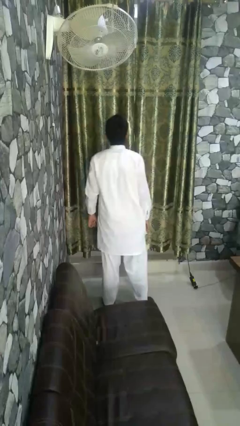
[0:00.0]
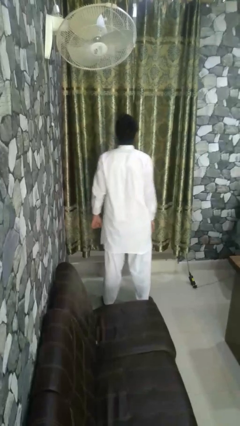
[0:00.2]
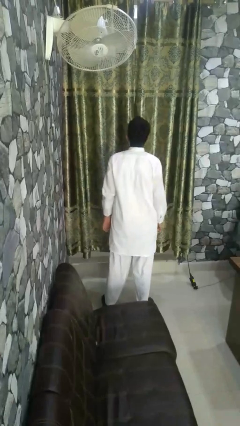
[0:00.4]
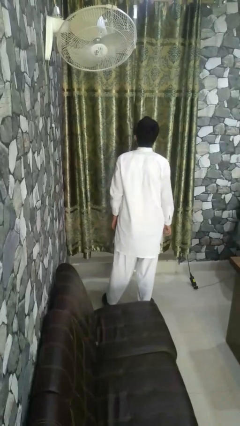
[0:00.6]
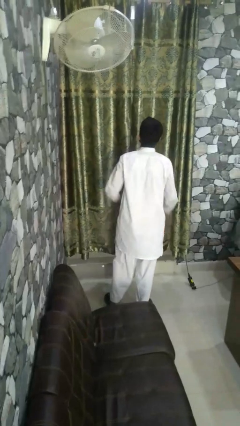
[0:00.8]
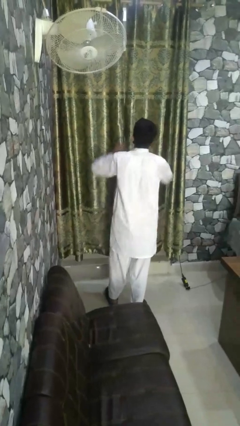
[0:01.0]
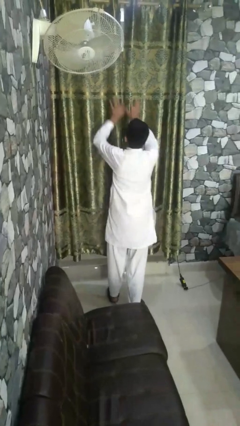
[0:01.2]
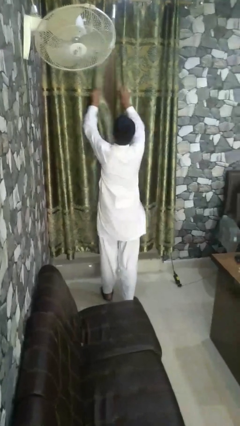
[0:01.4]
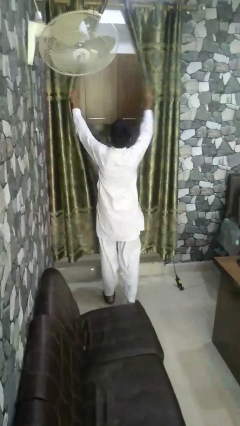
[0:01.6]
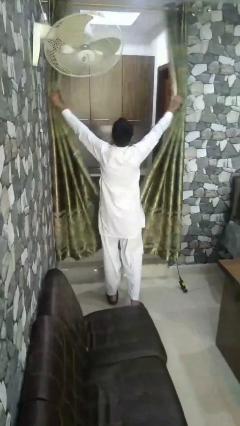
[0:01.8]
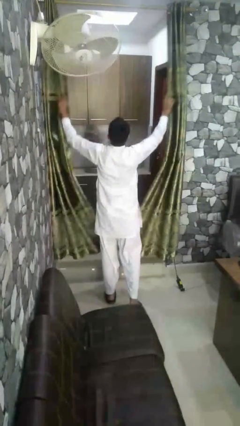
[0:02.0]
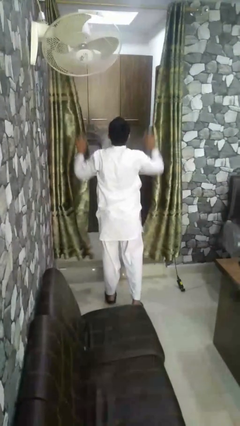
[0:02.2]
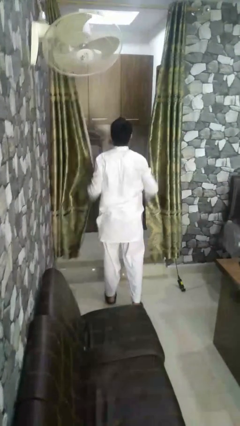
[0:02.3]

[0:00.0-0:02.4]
person opens curtains

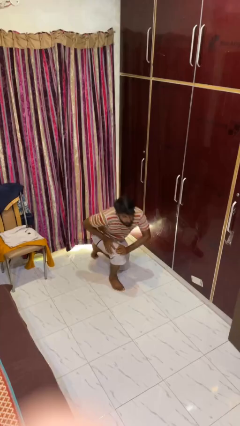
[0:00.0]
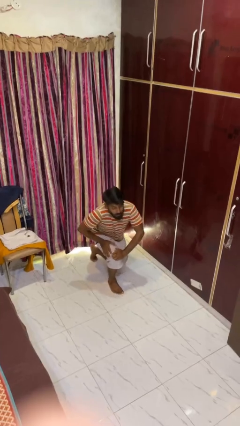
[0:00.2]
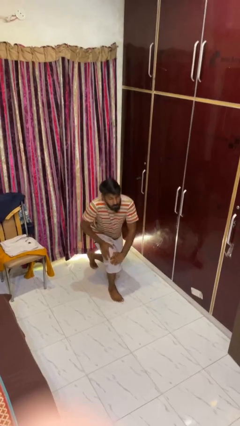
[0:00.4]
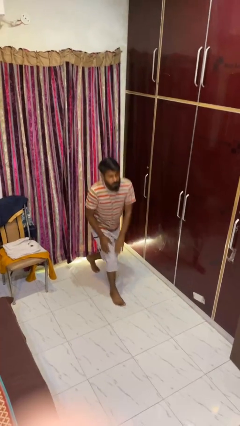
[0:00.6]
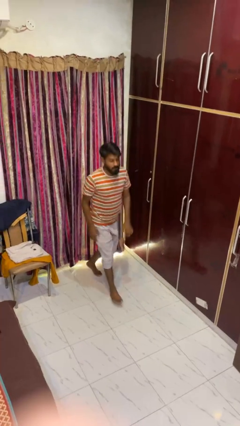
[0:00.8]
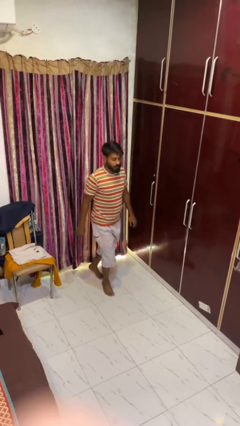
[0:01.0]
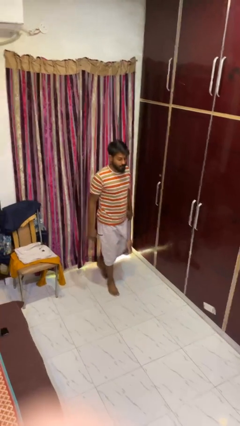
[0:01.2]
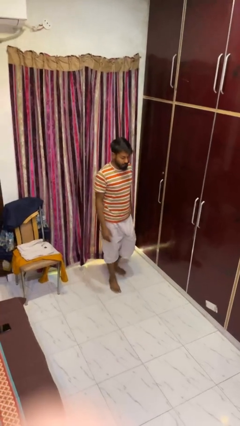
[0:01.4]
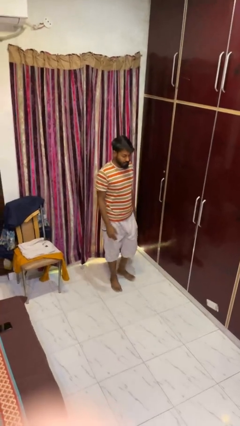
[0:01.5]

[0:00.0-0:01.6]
person stands up from floor

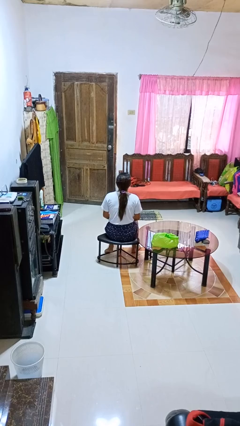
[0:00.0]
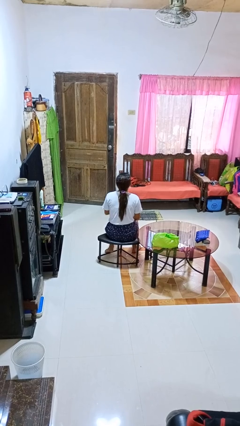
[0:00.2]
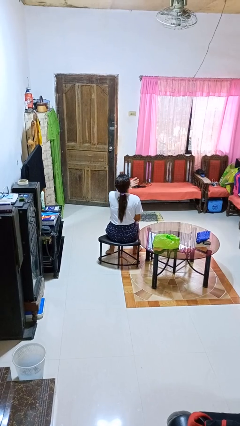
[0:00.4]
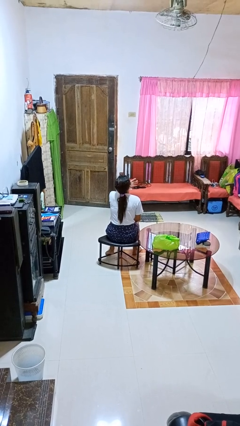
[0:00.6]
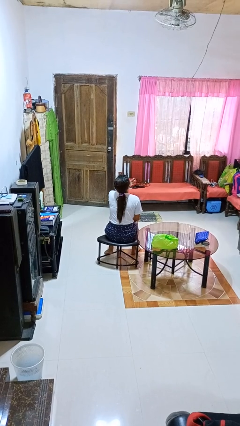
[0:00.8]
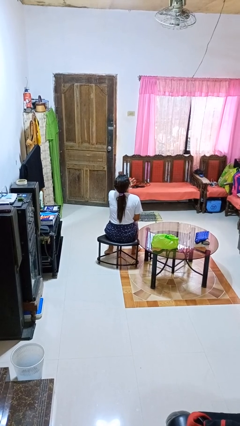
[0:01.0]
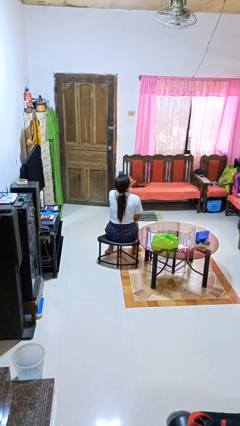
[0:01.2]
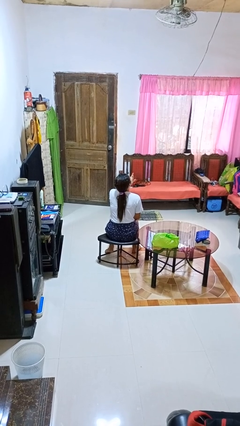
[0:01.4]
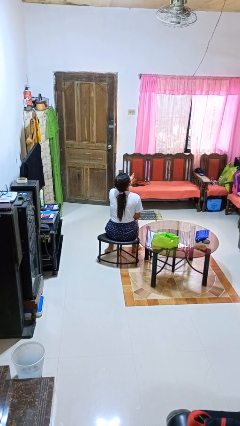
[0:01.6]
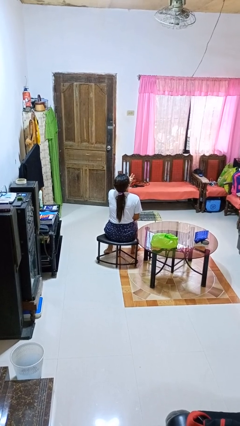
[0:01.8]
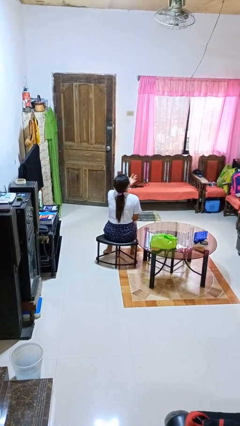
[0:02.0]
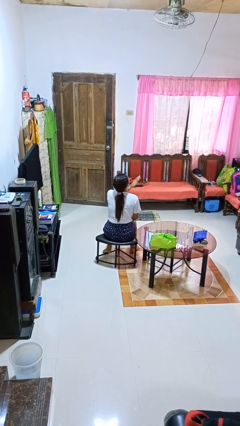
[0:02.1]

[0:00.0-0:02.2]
person licks fingers

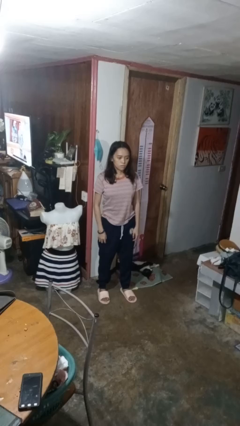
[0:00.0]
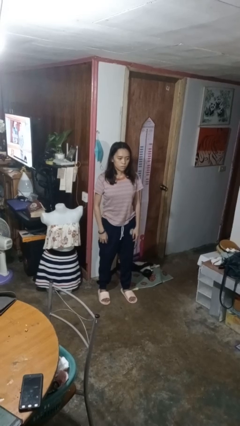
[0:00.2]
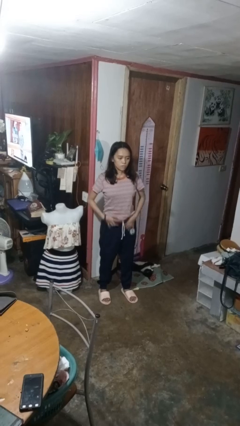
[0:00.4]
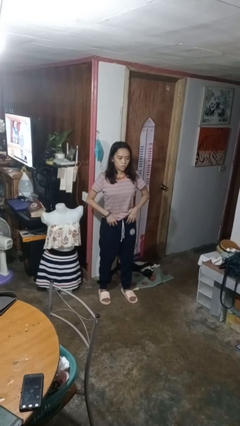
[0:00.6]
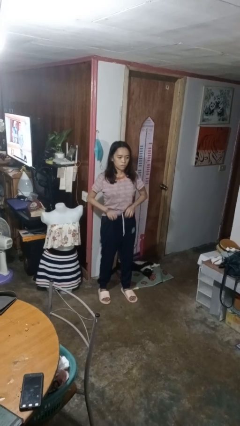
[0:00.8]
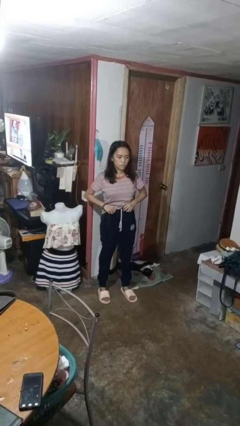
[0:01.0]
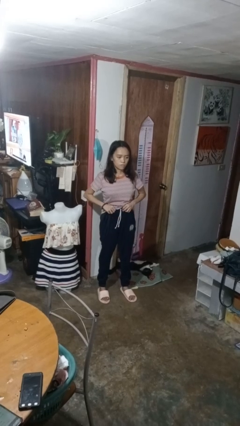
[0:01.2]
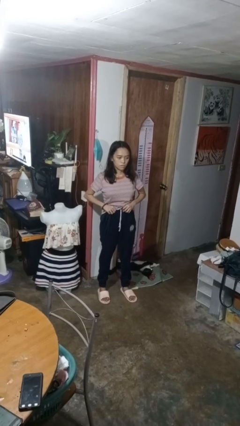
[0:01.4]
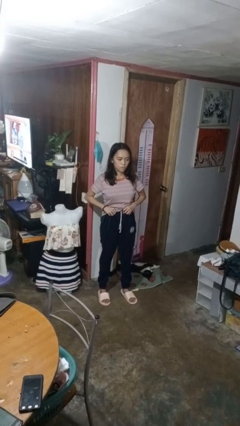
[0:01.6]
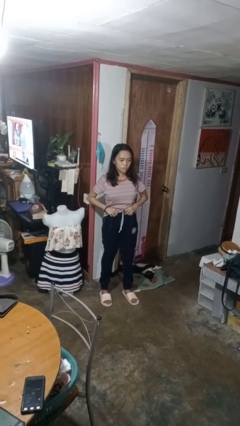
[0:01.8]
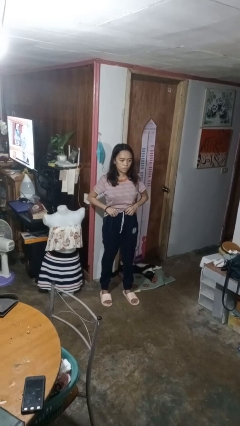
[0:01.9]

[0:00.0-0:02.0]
person hikes up pants

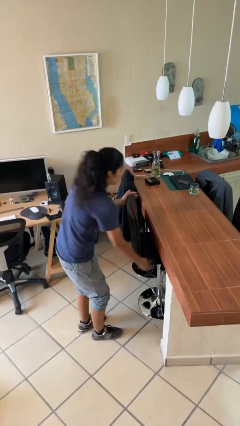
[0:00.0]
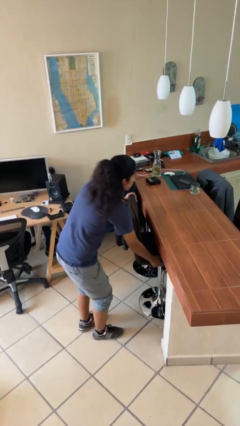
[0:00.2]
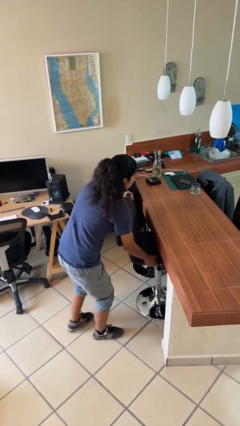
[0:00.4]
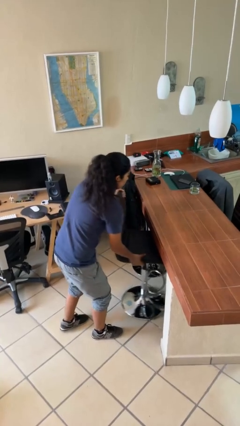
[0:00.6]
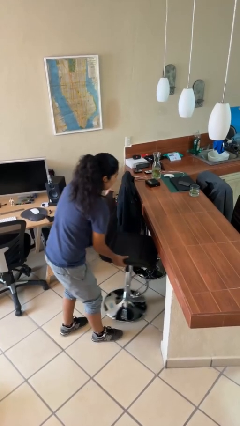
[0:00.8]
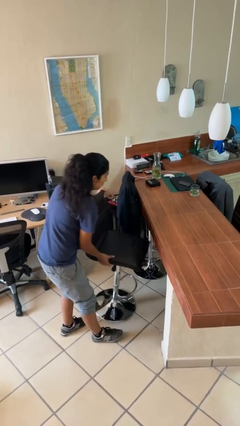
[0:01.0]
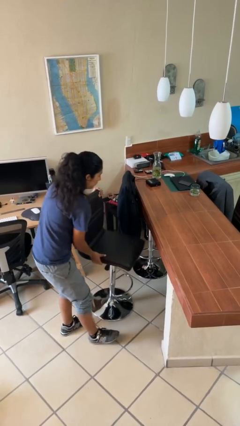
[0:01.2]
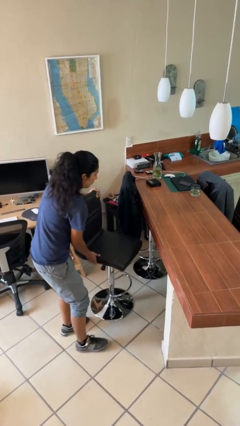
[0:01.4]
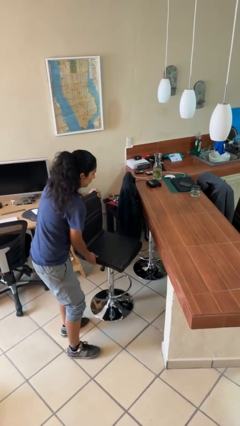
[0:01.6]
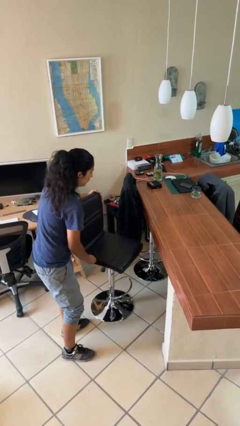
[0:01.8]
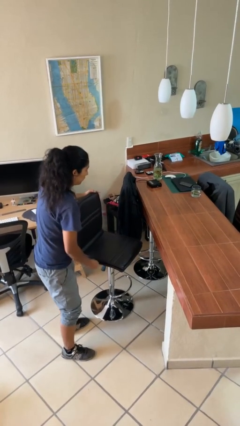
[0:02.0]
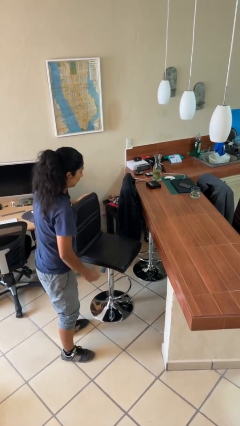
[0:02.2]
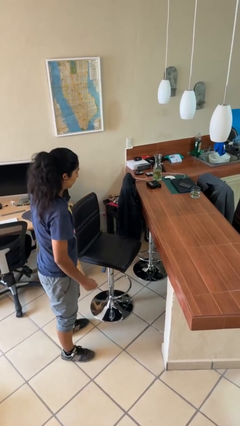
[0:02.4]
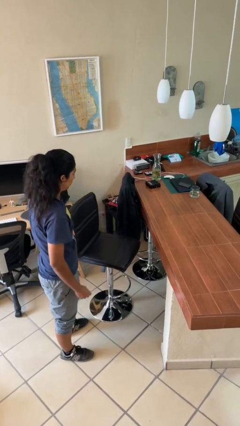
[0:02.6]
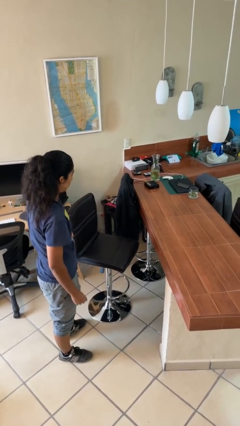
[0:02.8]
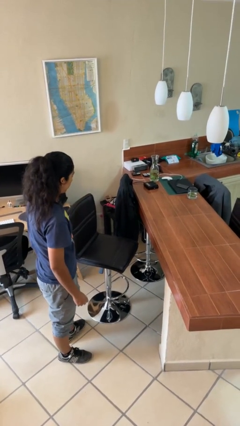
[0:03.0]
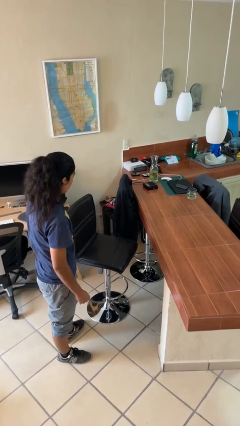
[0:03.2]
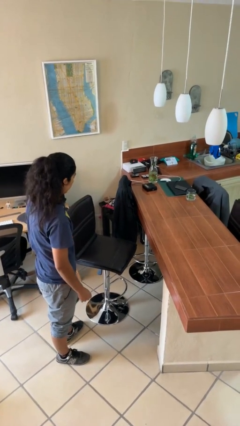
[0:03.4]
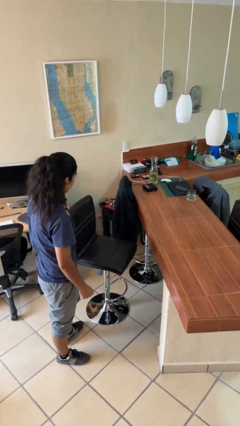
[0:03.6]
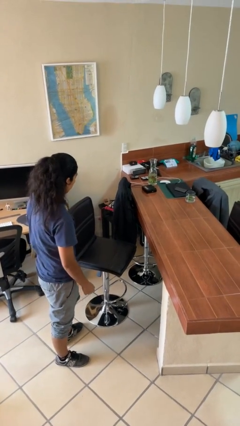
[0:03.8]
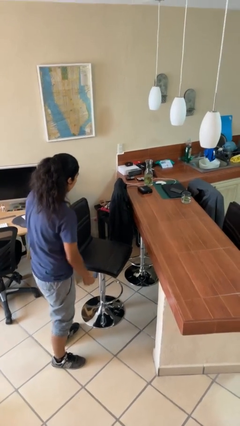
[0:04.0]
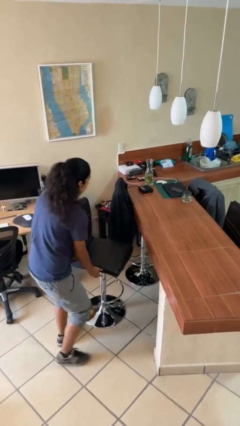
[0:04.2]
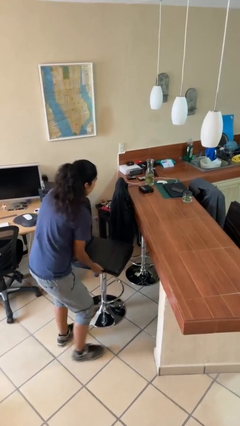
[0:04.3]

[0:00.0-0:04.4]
person pulls out chair

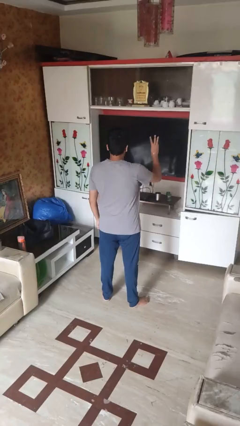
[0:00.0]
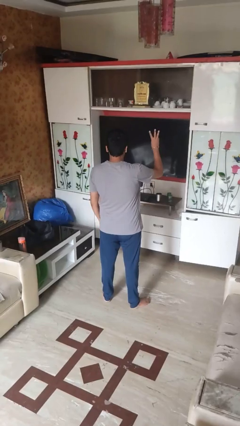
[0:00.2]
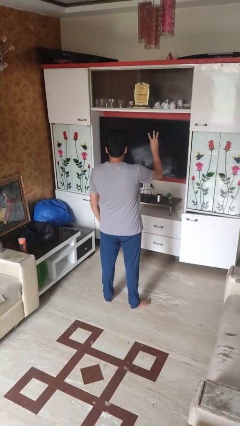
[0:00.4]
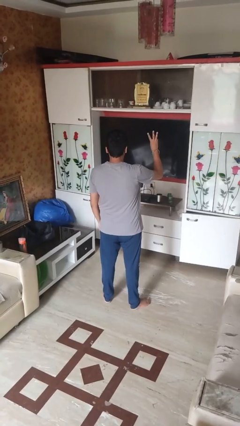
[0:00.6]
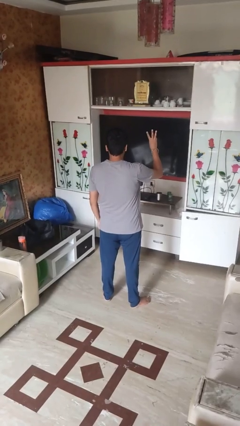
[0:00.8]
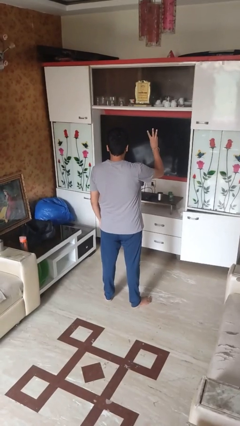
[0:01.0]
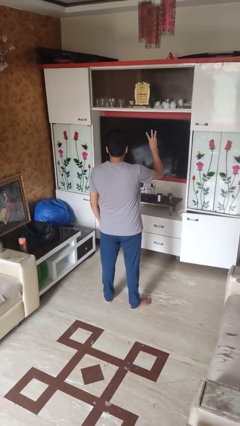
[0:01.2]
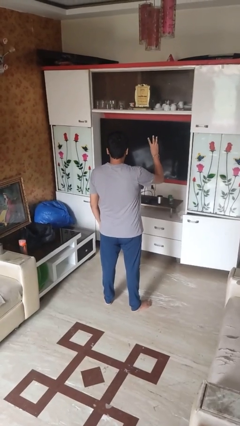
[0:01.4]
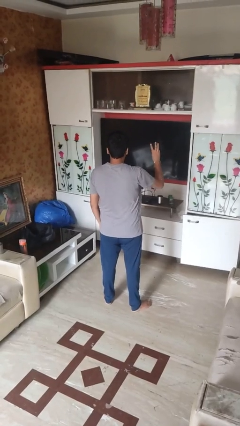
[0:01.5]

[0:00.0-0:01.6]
person gestures number three

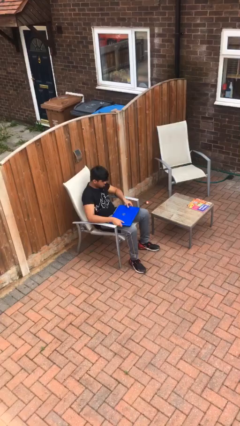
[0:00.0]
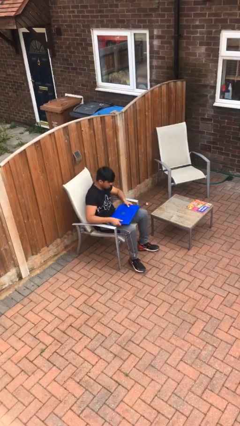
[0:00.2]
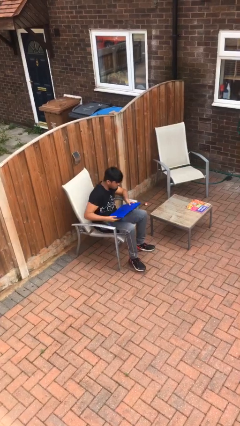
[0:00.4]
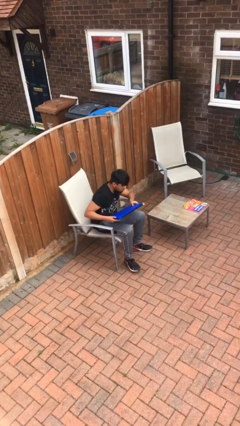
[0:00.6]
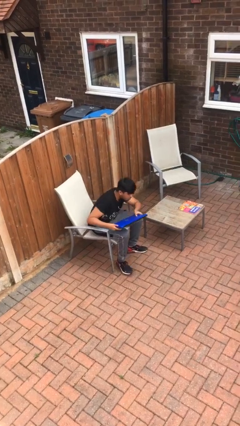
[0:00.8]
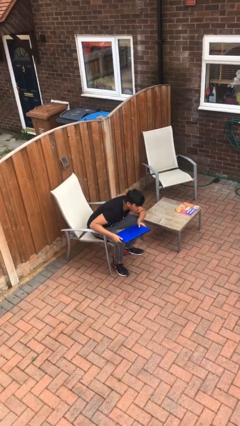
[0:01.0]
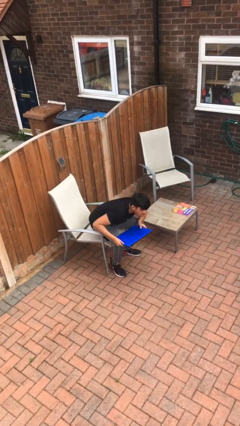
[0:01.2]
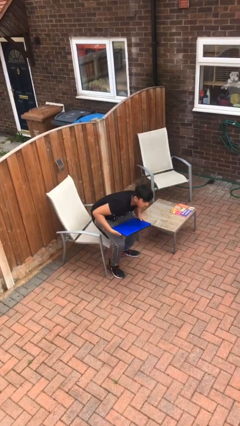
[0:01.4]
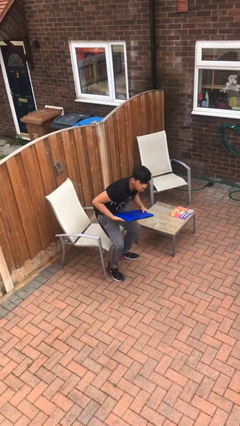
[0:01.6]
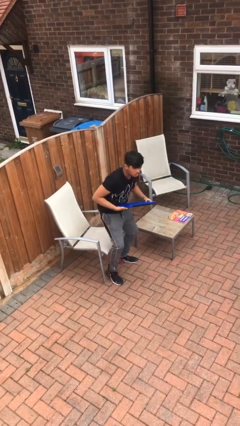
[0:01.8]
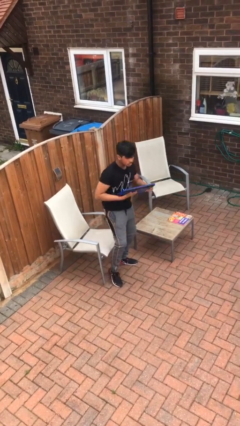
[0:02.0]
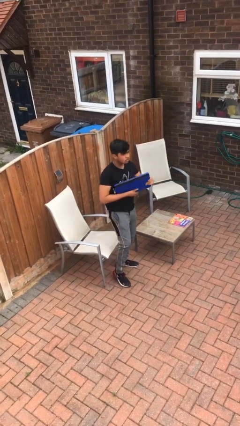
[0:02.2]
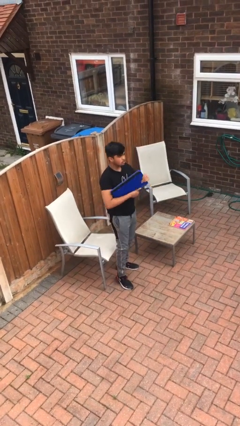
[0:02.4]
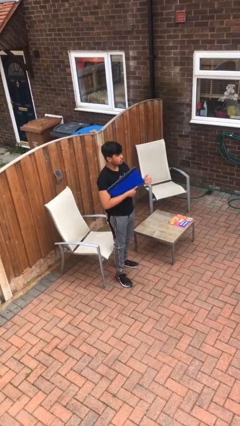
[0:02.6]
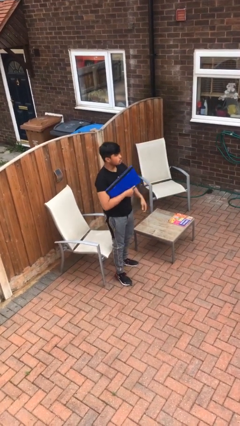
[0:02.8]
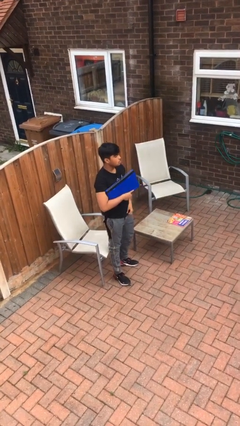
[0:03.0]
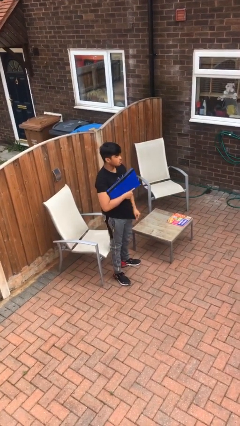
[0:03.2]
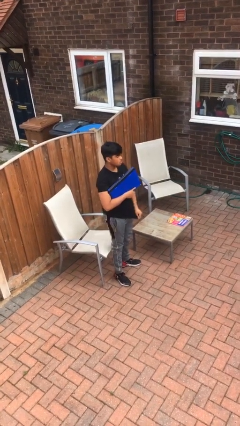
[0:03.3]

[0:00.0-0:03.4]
person stands up
